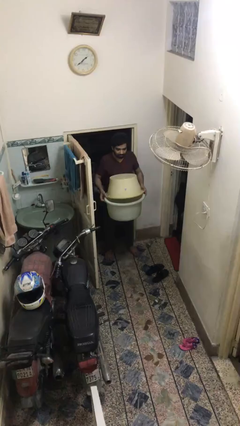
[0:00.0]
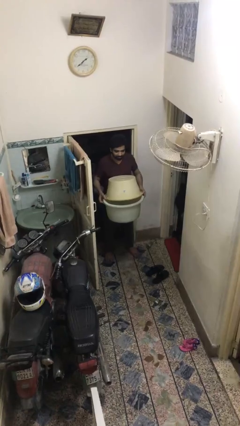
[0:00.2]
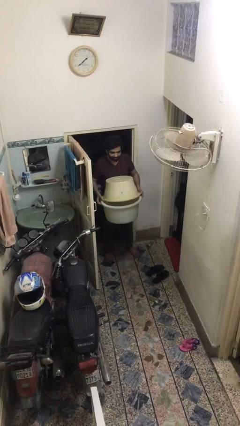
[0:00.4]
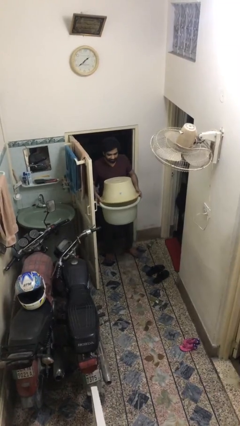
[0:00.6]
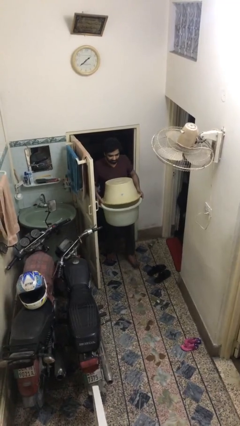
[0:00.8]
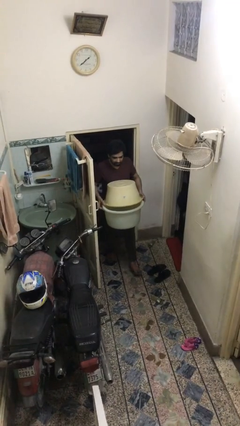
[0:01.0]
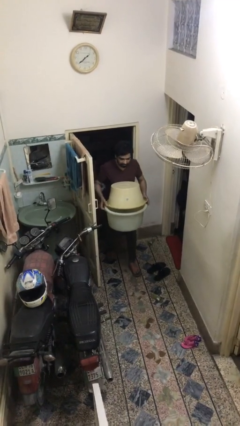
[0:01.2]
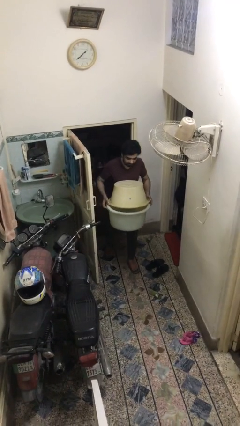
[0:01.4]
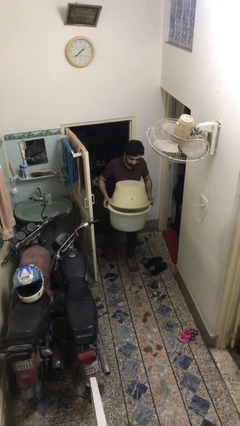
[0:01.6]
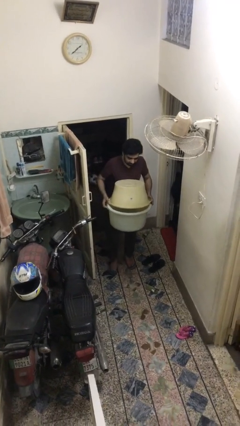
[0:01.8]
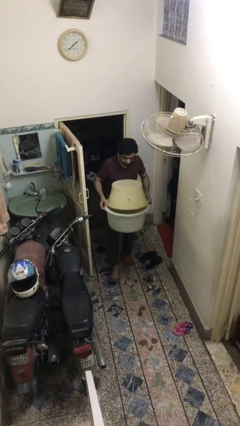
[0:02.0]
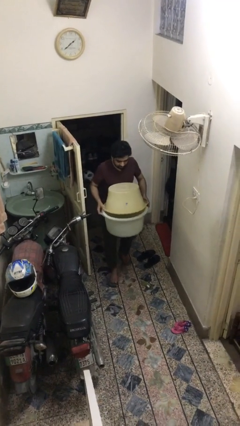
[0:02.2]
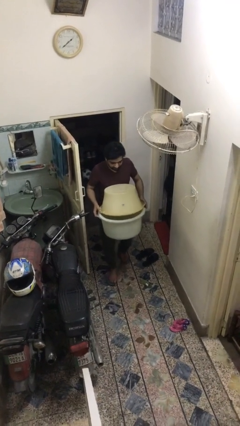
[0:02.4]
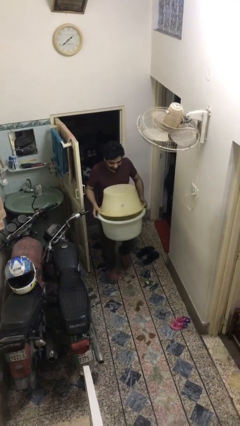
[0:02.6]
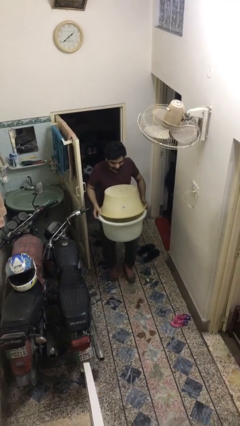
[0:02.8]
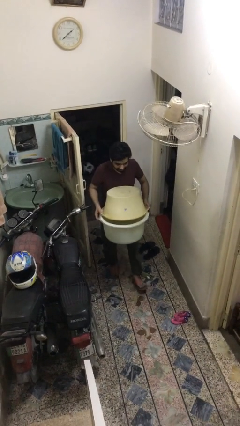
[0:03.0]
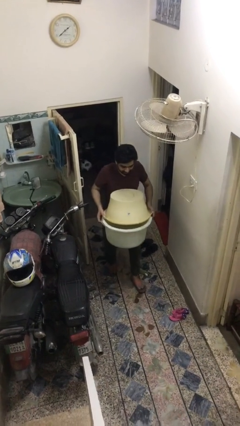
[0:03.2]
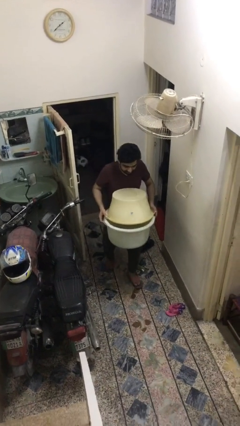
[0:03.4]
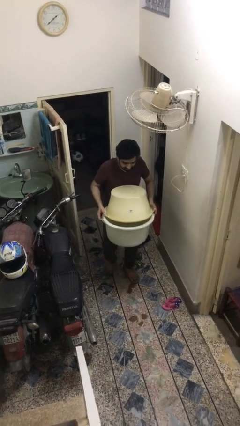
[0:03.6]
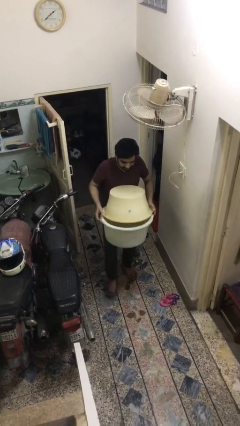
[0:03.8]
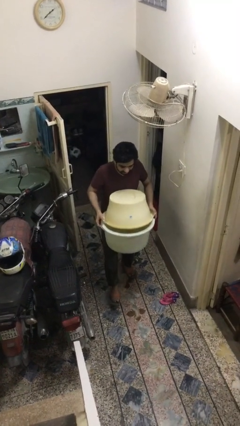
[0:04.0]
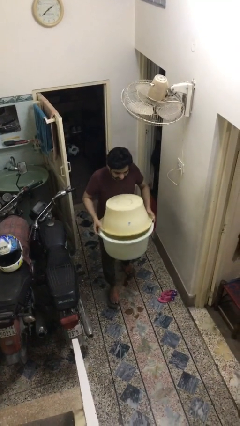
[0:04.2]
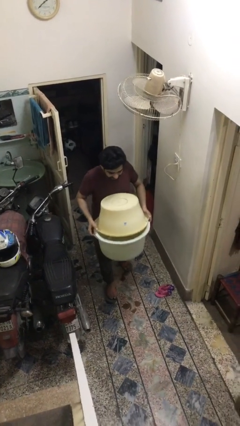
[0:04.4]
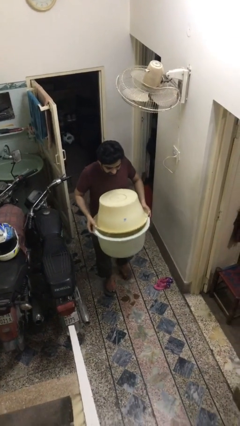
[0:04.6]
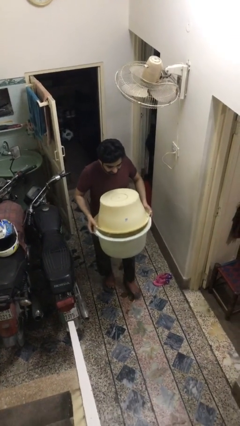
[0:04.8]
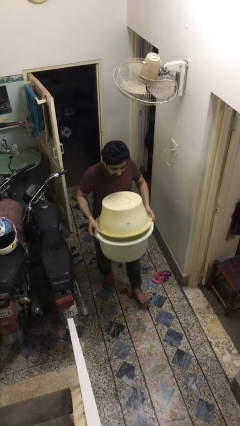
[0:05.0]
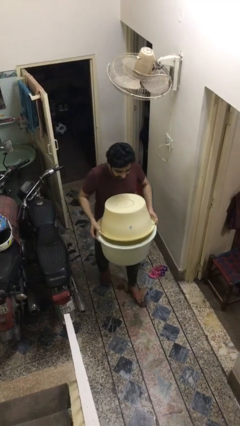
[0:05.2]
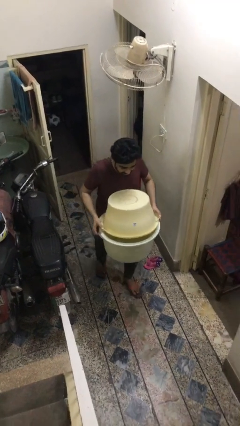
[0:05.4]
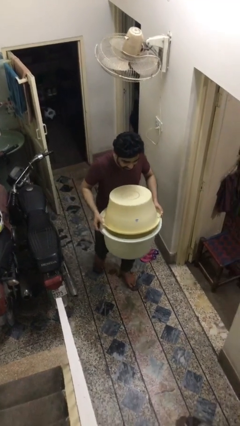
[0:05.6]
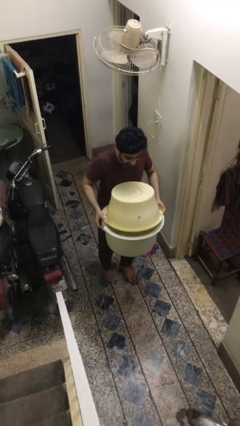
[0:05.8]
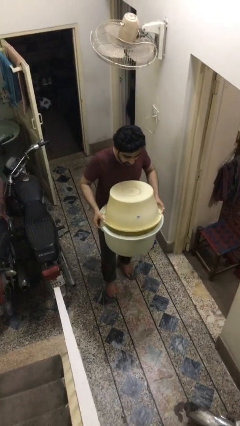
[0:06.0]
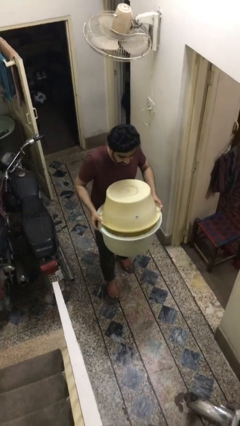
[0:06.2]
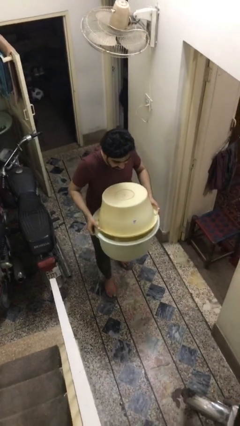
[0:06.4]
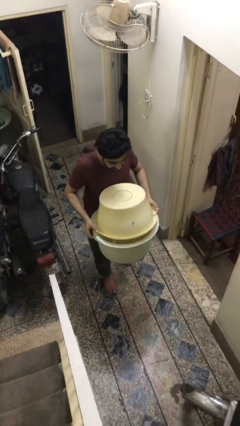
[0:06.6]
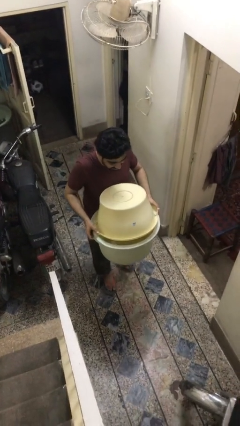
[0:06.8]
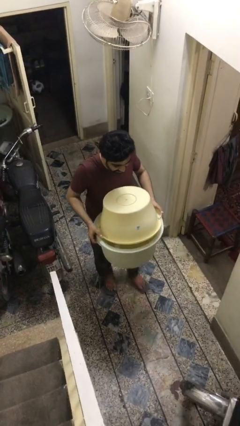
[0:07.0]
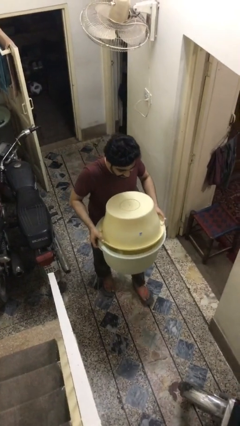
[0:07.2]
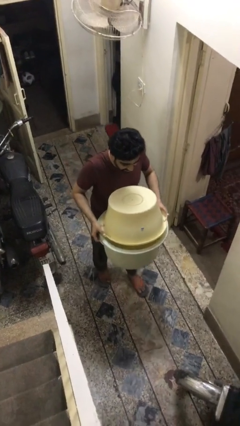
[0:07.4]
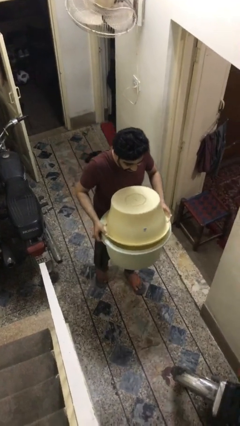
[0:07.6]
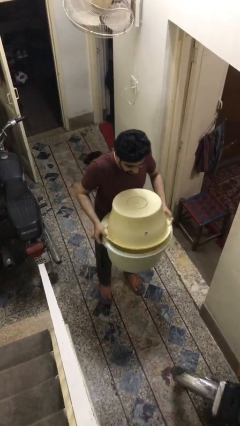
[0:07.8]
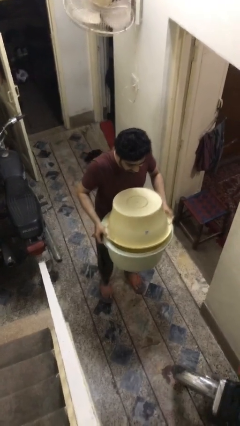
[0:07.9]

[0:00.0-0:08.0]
person carries heavy object

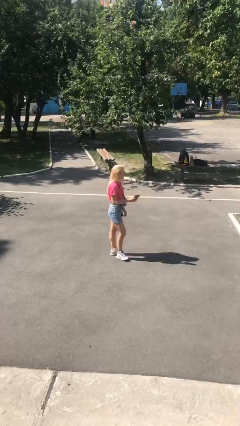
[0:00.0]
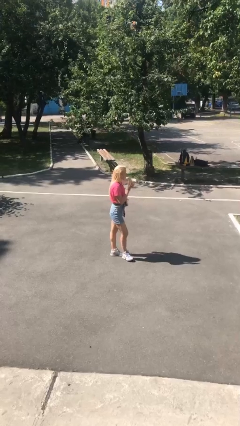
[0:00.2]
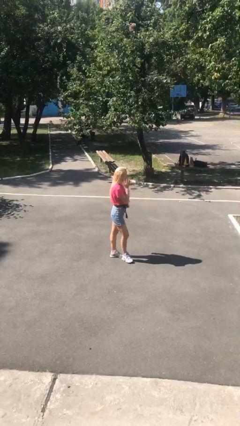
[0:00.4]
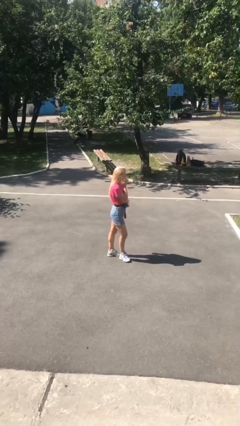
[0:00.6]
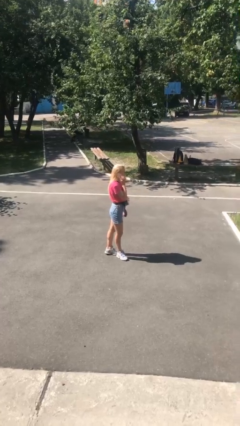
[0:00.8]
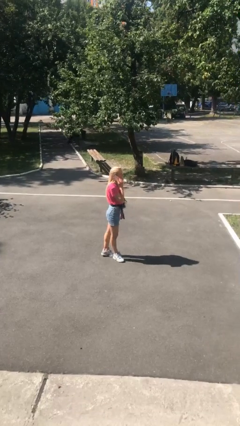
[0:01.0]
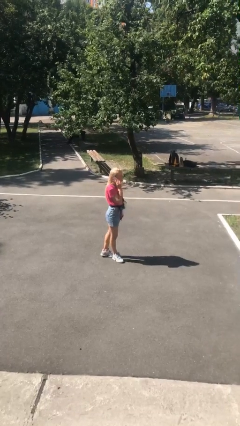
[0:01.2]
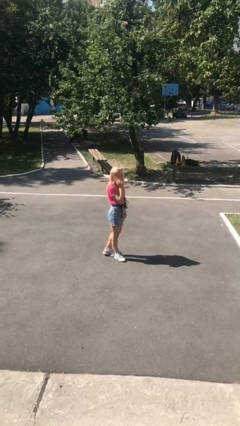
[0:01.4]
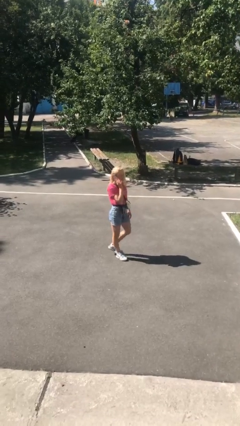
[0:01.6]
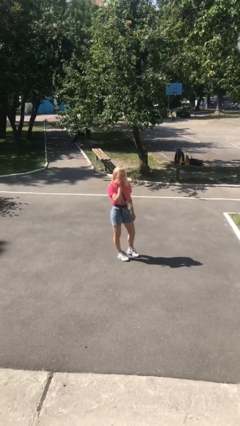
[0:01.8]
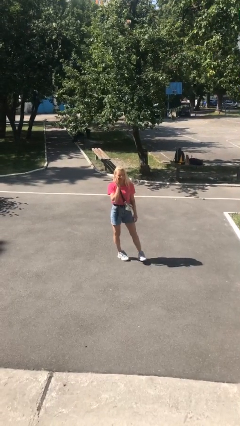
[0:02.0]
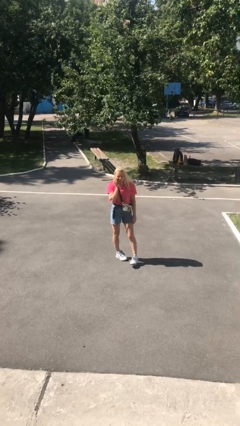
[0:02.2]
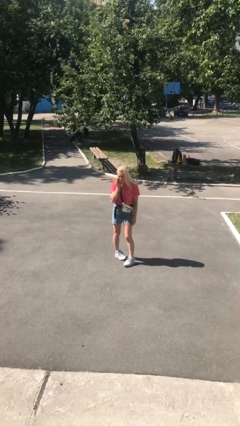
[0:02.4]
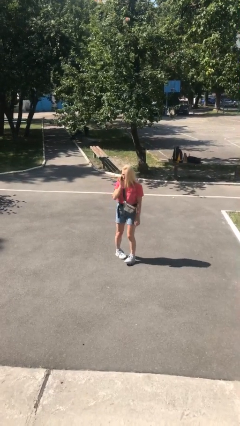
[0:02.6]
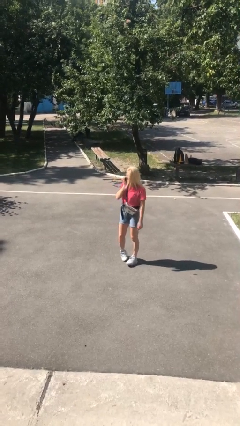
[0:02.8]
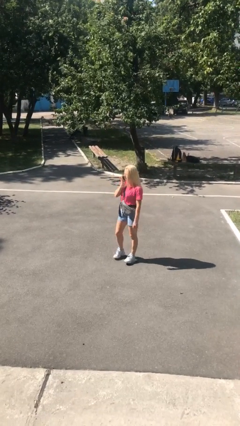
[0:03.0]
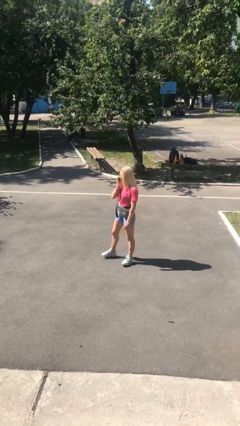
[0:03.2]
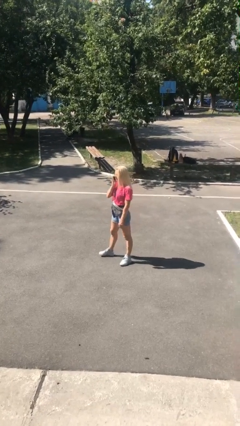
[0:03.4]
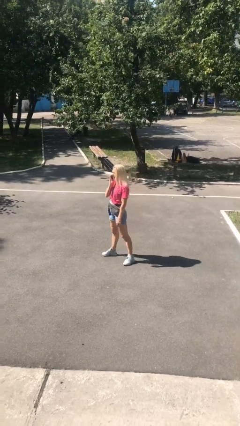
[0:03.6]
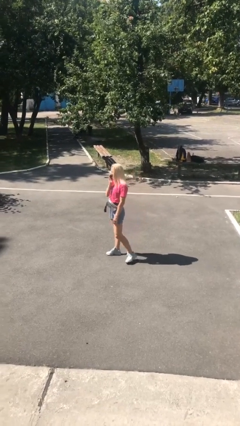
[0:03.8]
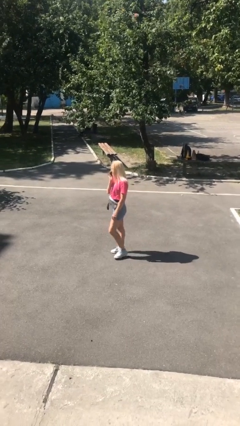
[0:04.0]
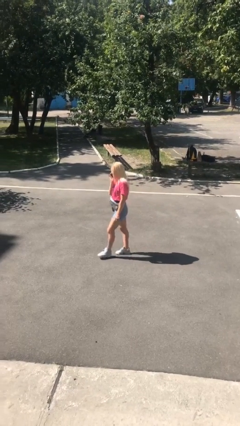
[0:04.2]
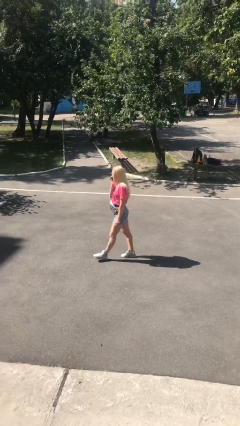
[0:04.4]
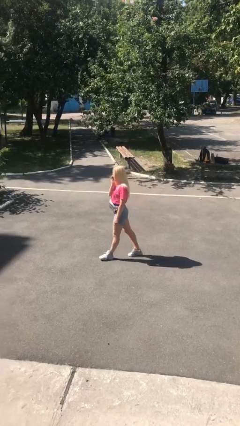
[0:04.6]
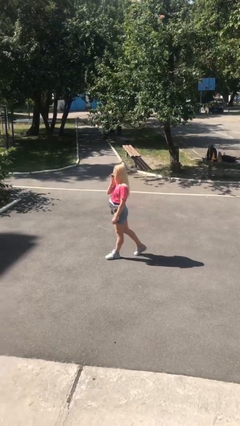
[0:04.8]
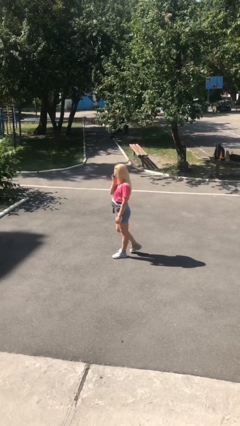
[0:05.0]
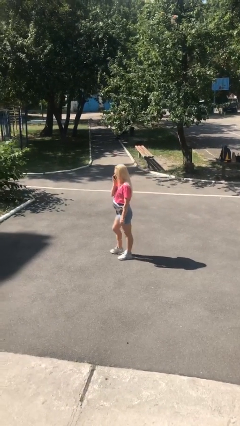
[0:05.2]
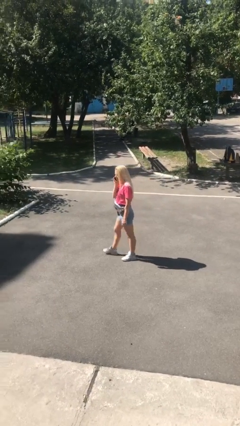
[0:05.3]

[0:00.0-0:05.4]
person talks on phone

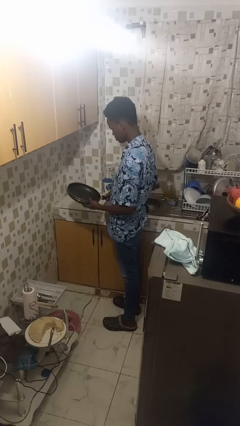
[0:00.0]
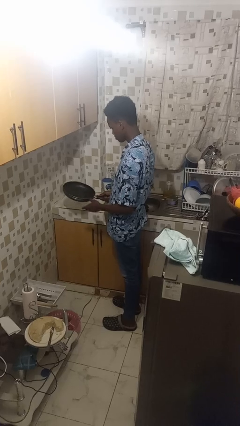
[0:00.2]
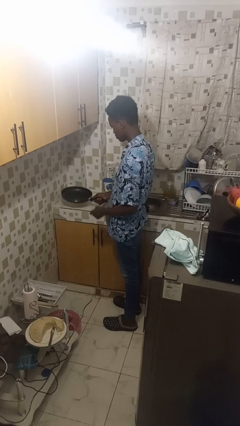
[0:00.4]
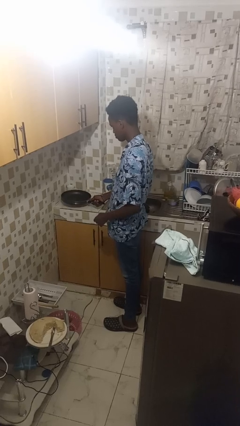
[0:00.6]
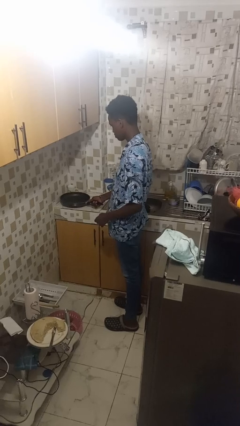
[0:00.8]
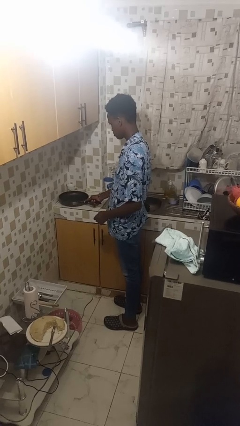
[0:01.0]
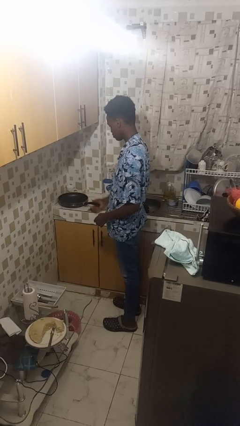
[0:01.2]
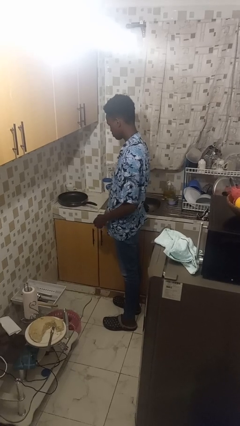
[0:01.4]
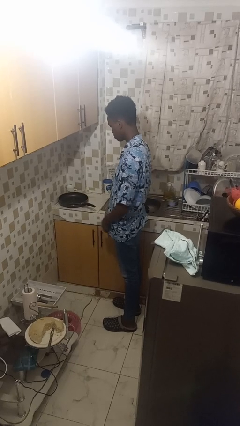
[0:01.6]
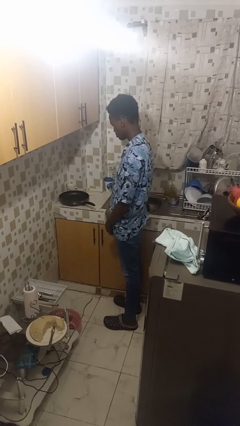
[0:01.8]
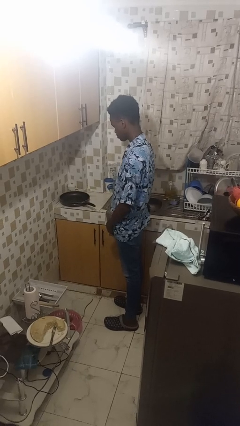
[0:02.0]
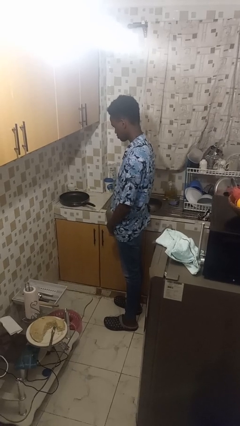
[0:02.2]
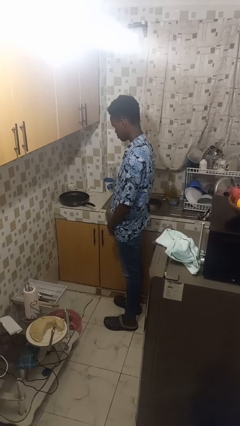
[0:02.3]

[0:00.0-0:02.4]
person puts down object on countertop

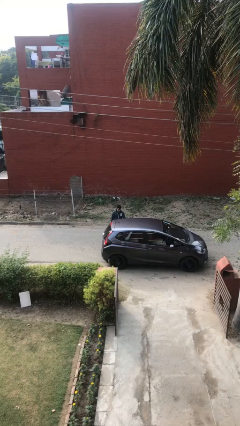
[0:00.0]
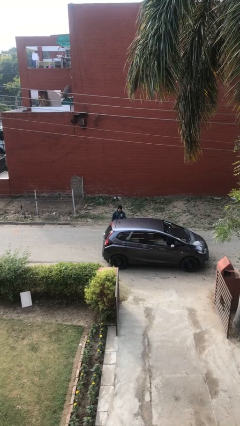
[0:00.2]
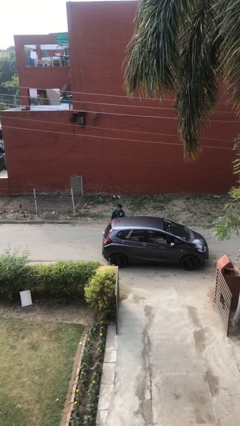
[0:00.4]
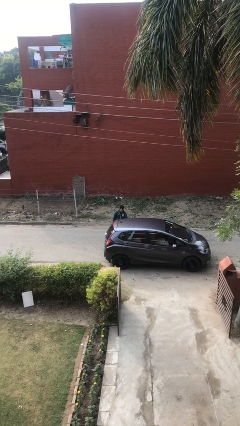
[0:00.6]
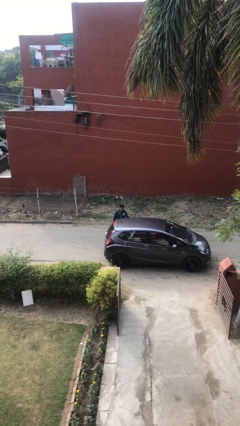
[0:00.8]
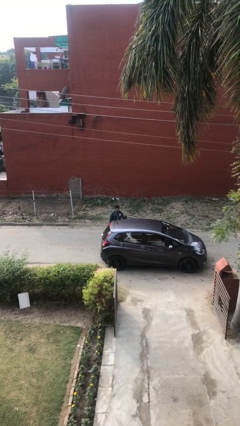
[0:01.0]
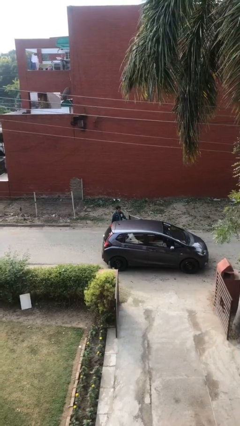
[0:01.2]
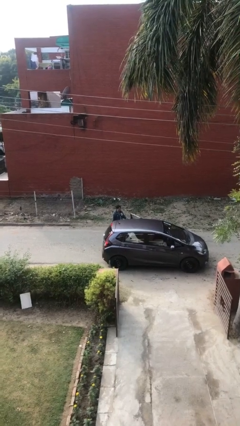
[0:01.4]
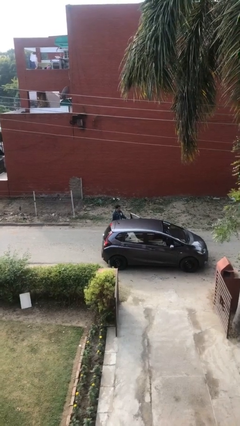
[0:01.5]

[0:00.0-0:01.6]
person opens car door

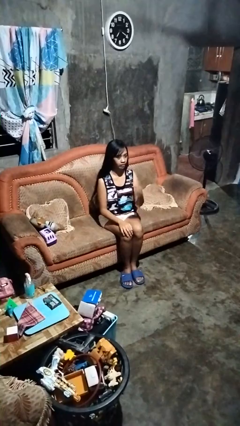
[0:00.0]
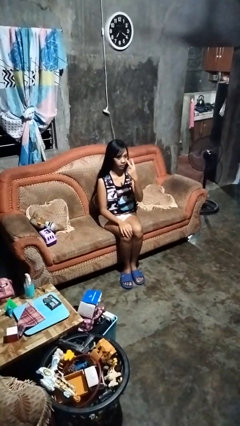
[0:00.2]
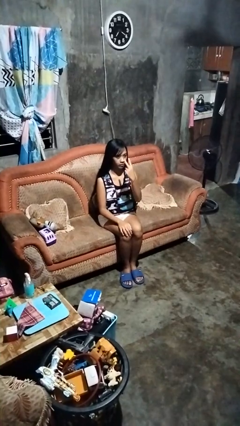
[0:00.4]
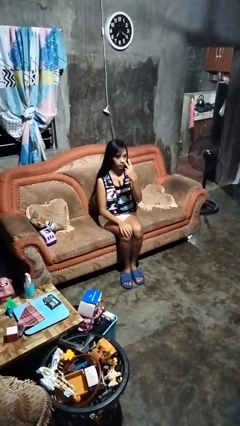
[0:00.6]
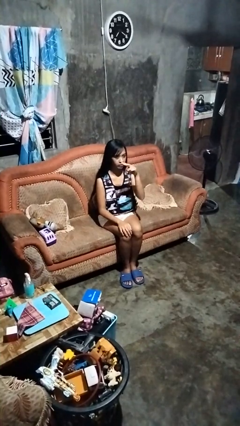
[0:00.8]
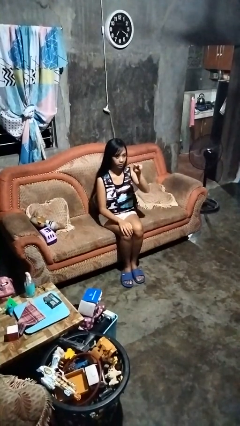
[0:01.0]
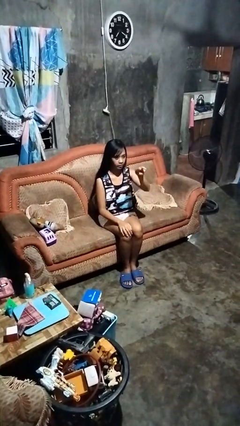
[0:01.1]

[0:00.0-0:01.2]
person gestures watch closely
